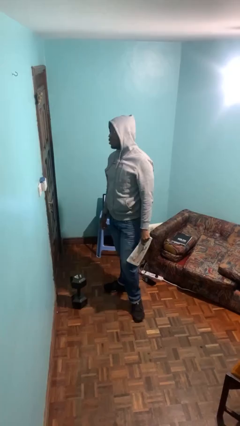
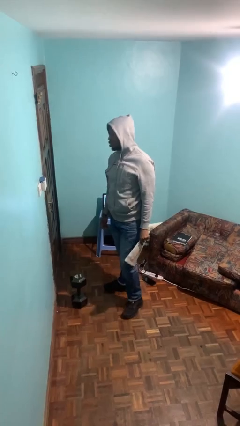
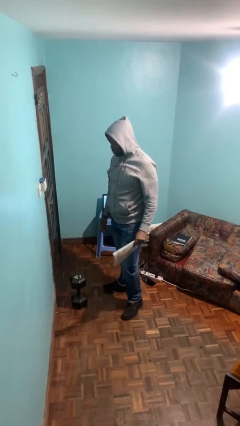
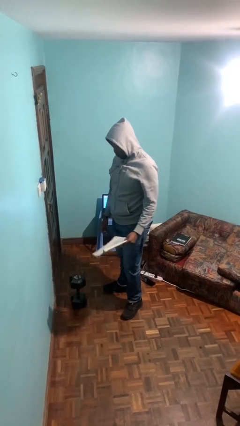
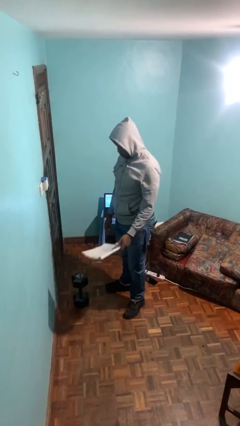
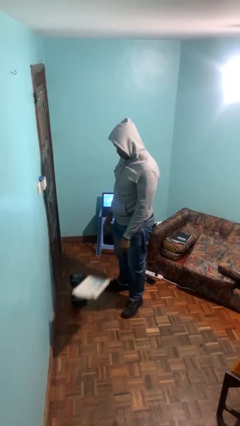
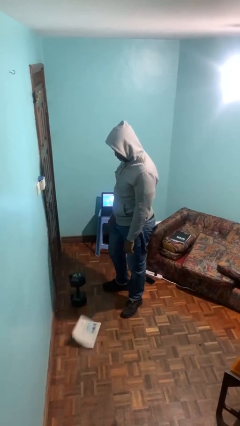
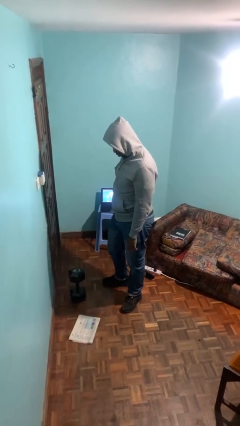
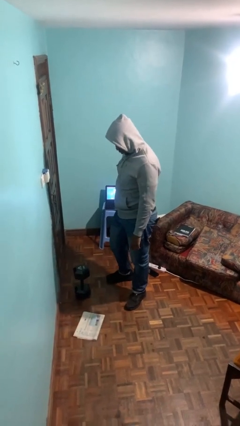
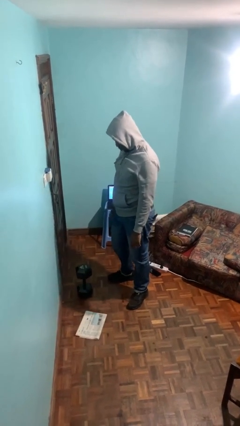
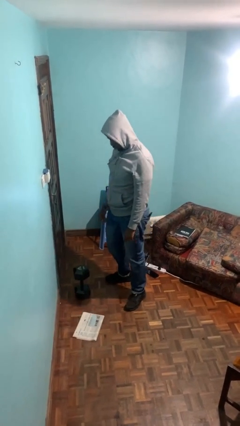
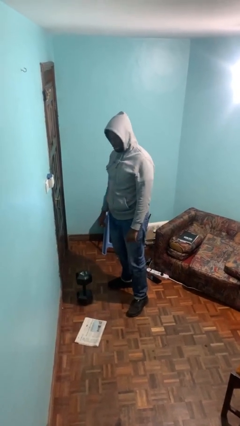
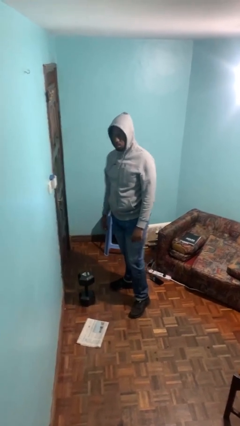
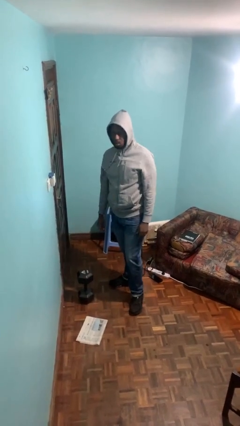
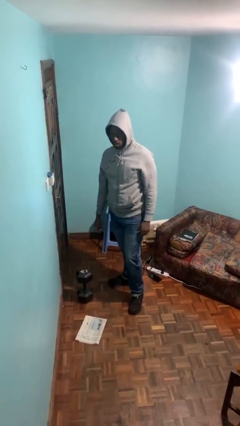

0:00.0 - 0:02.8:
person drops object

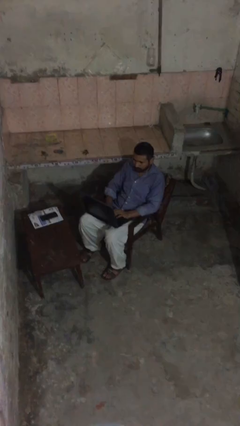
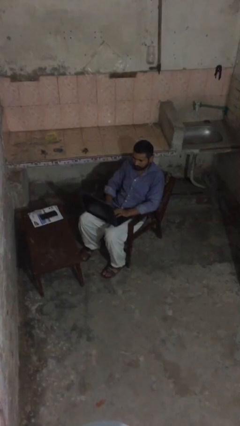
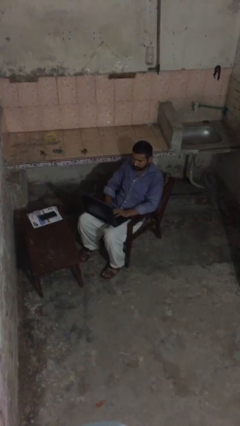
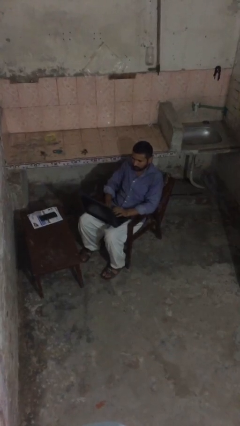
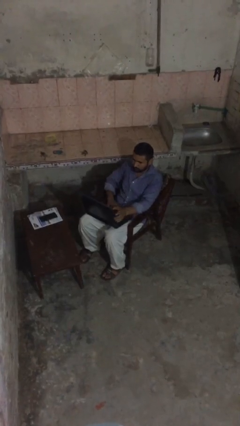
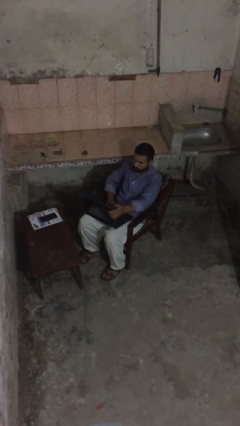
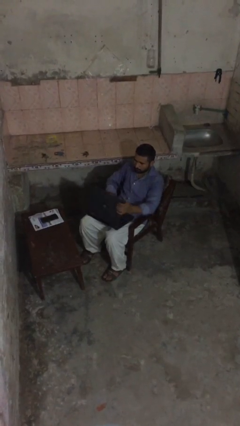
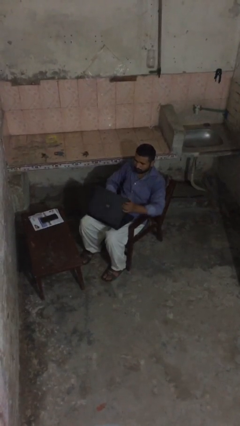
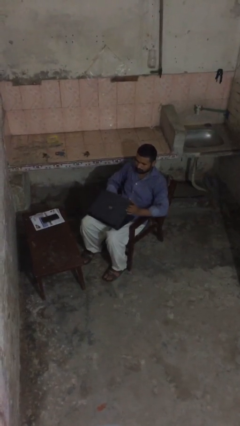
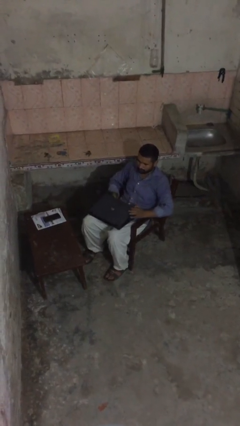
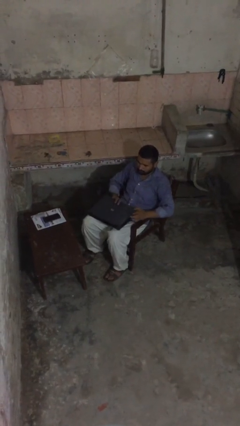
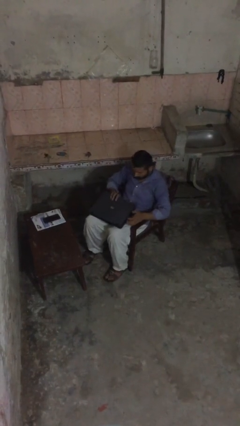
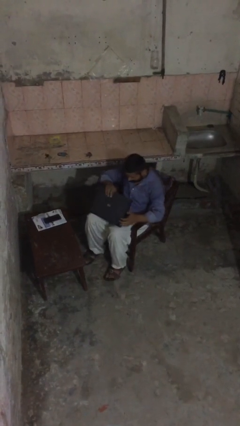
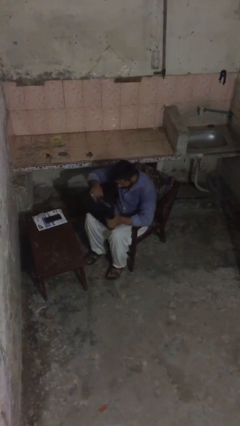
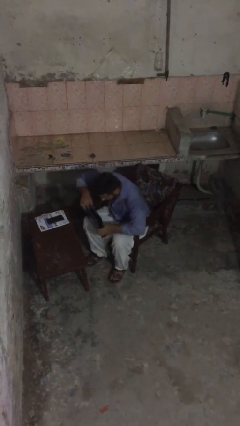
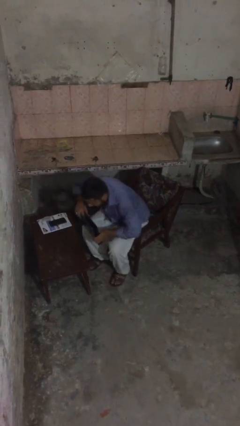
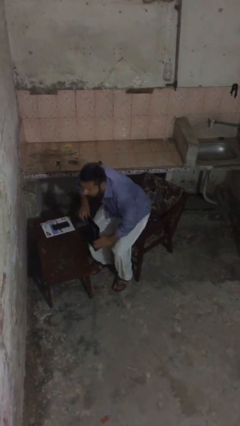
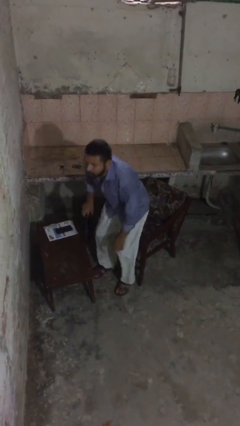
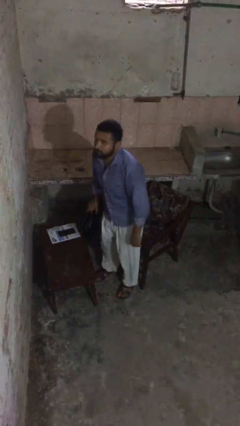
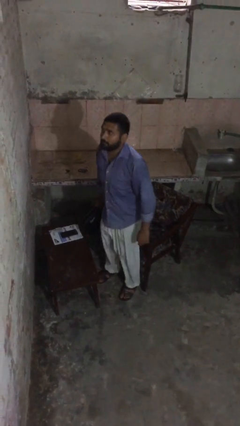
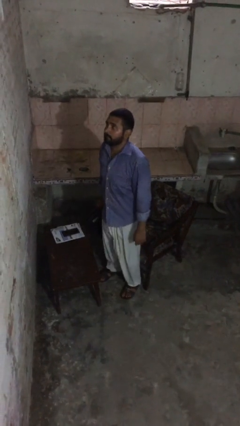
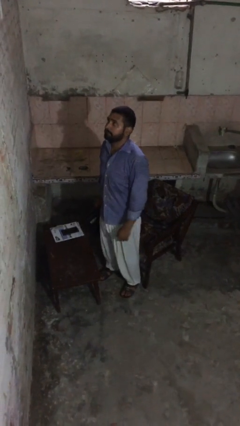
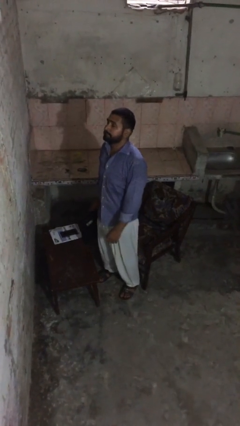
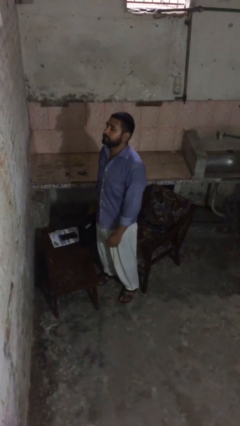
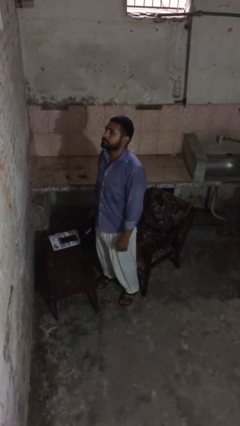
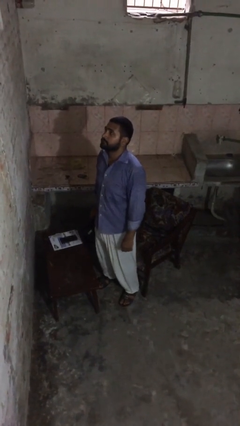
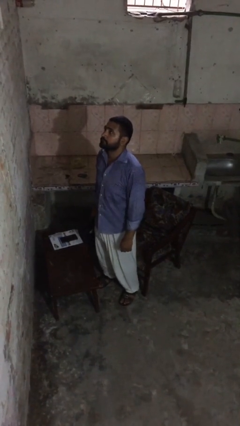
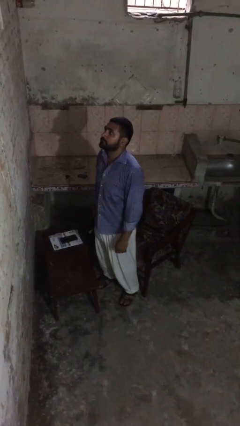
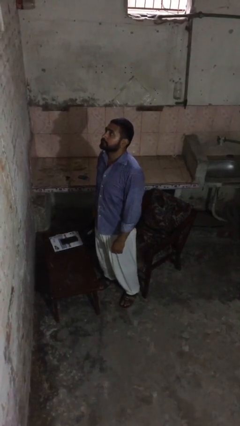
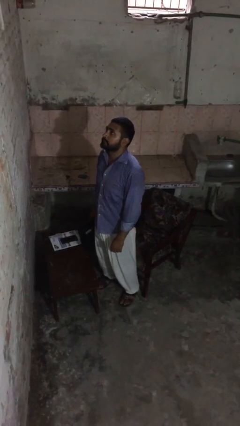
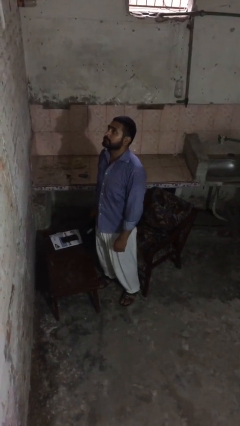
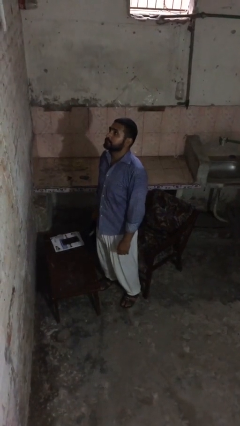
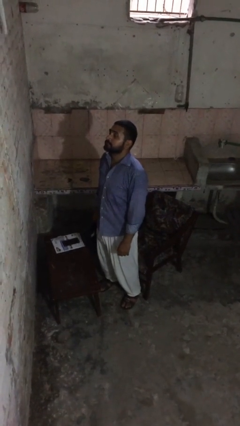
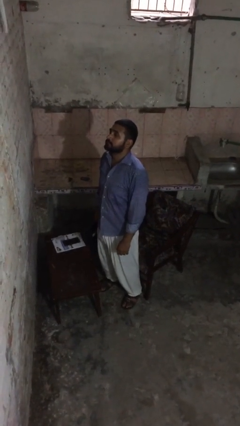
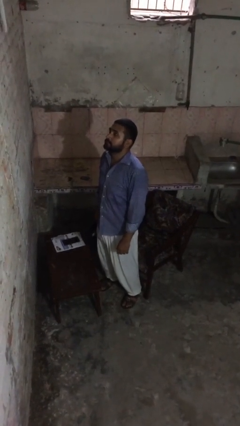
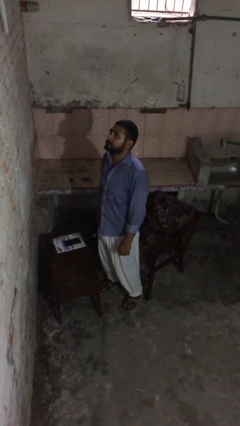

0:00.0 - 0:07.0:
person stands up

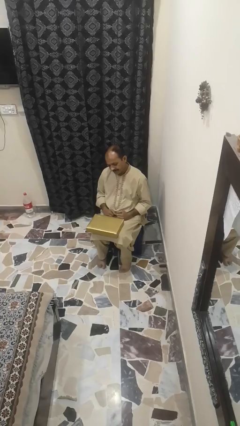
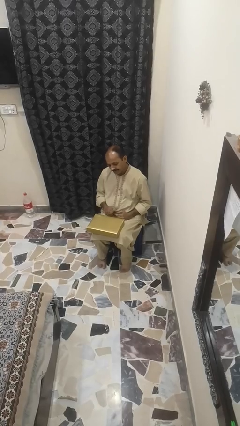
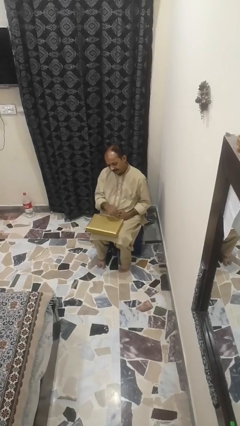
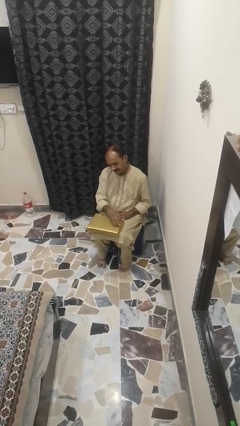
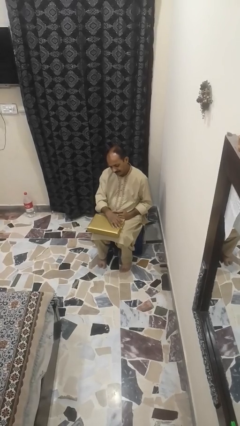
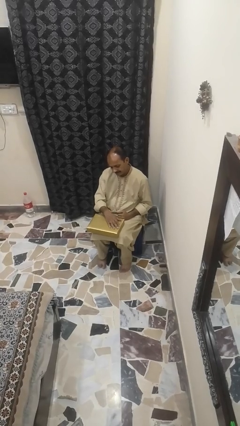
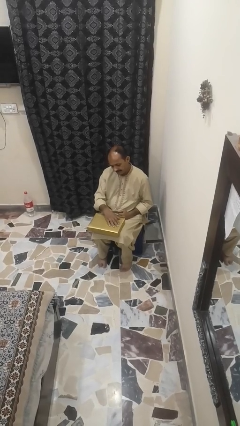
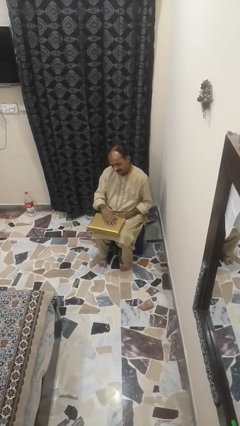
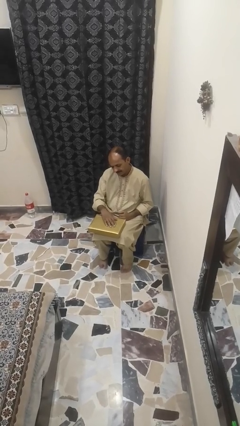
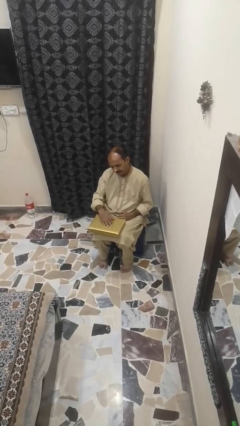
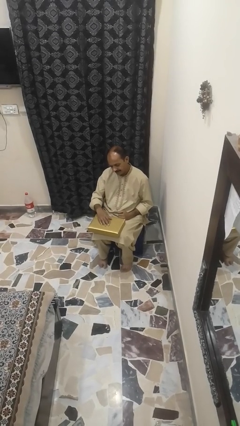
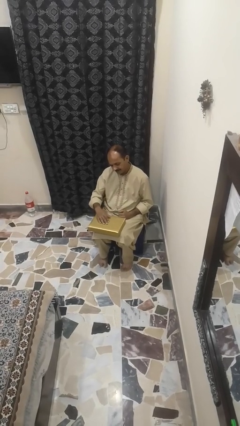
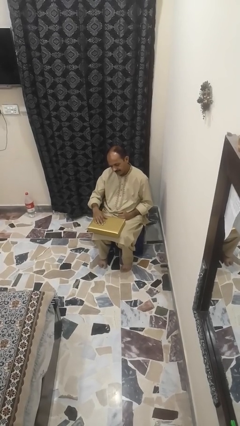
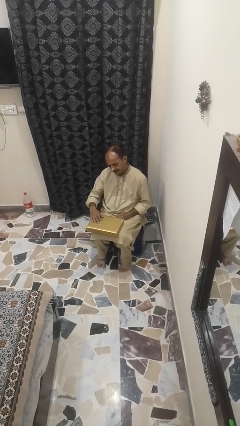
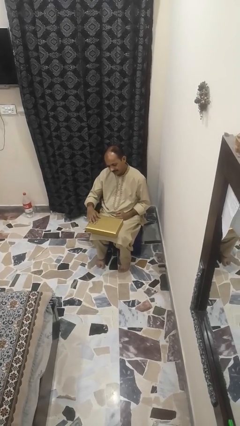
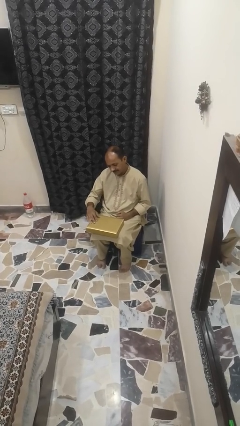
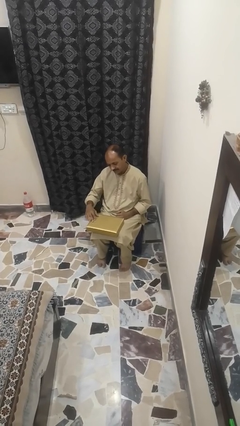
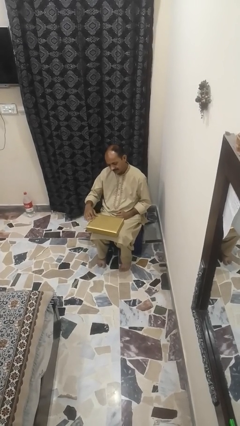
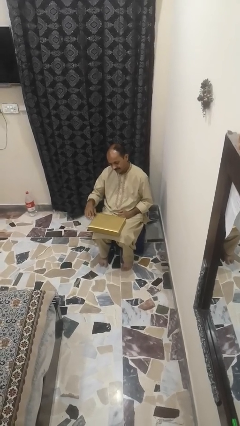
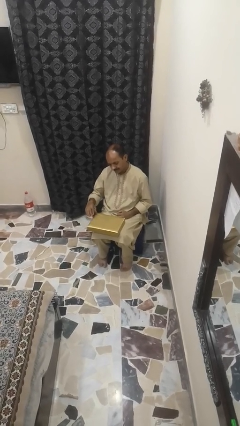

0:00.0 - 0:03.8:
person waves hand over object

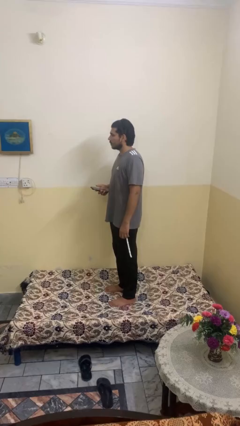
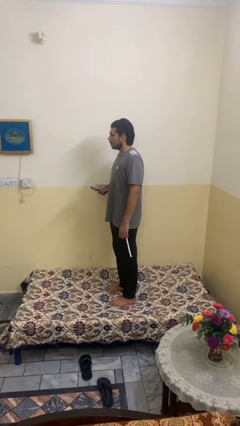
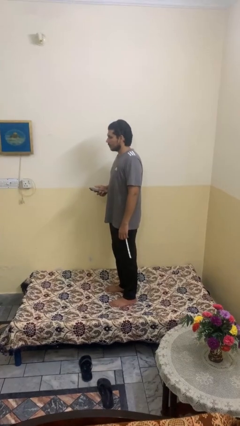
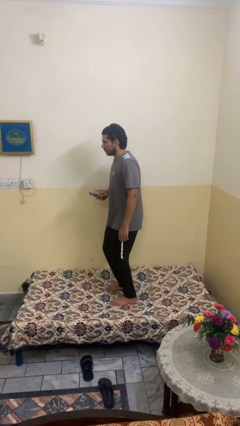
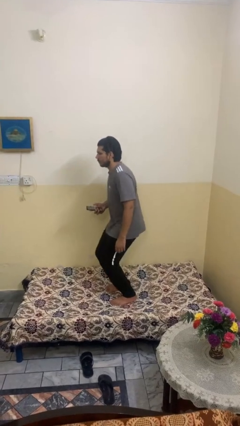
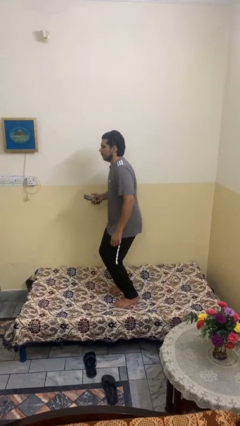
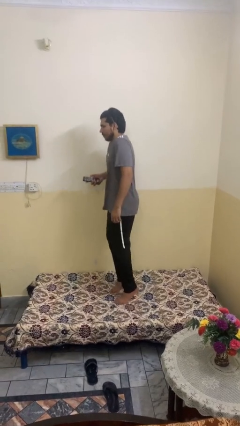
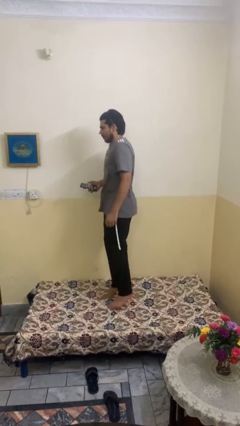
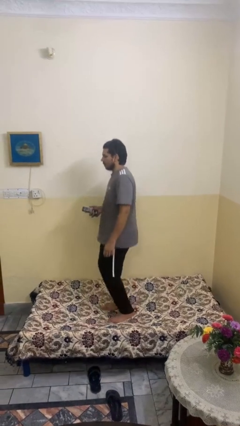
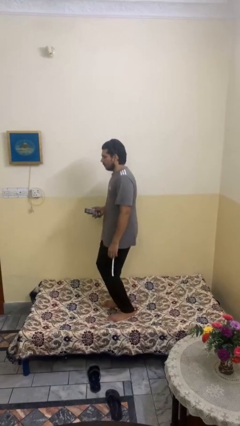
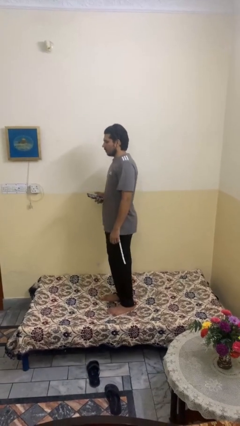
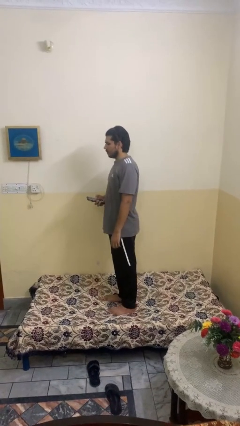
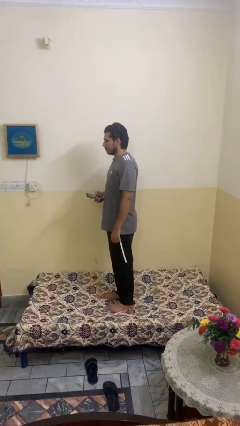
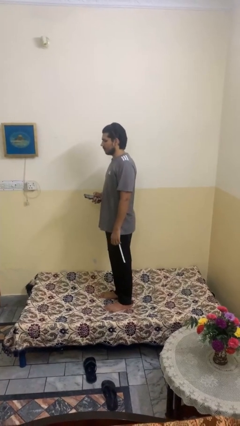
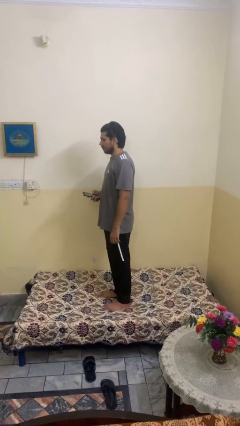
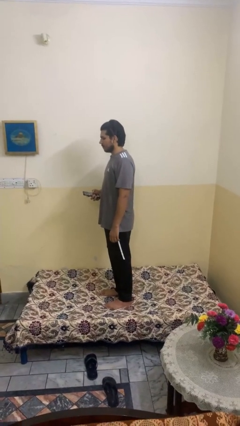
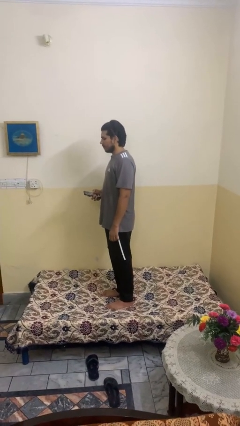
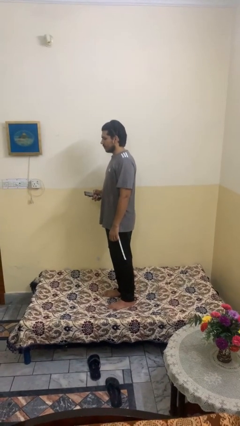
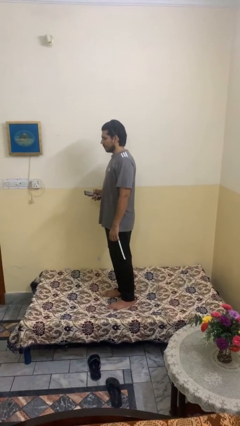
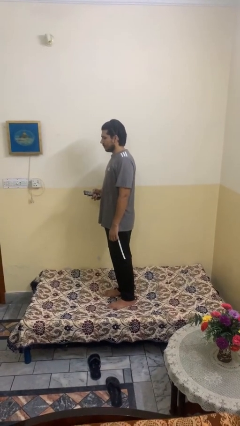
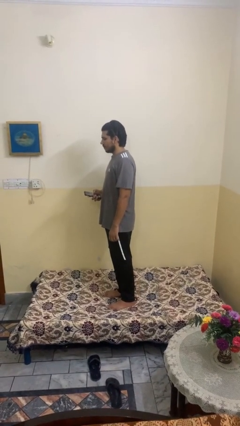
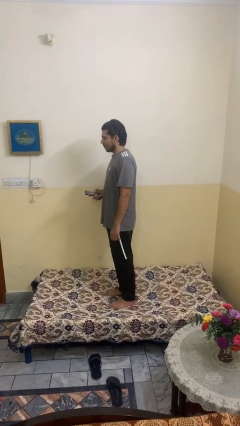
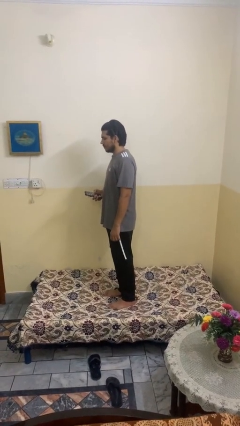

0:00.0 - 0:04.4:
person jumps on couch
